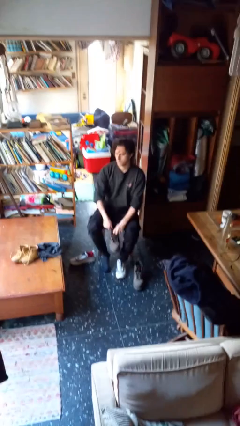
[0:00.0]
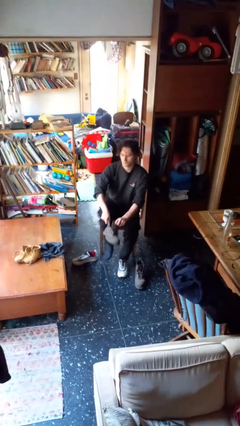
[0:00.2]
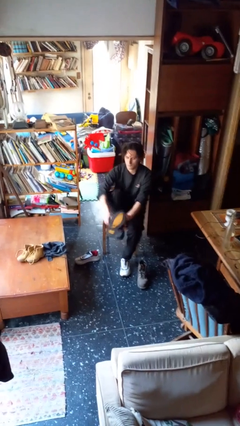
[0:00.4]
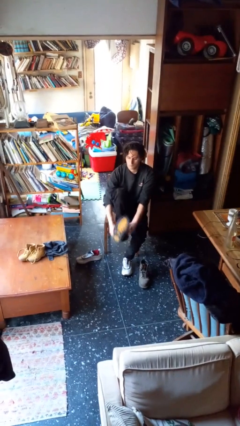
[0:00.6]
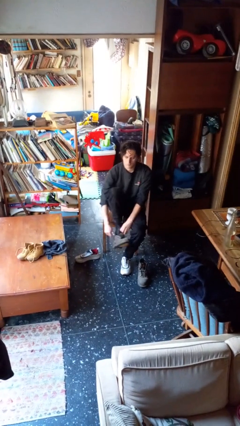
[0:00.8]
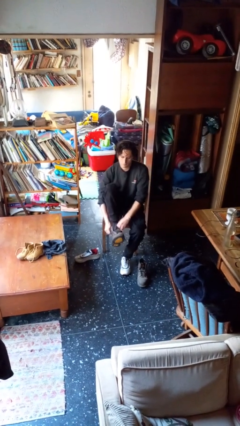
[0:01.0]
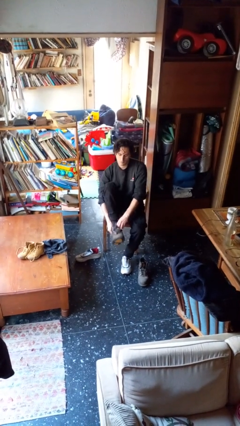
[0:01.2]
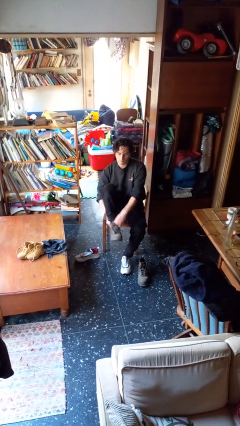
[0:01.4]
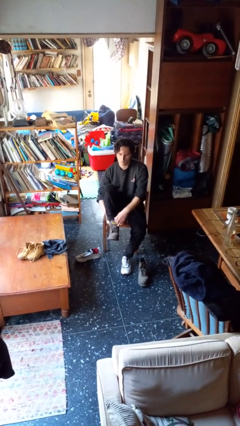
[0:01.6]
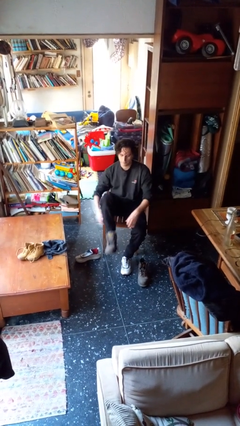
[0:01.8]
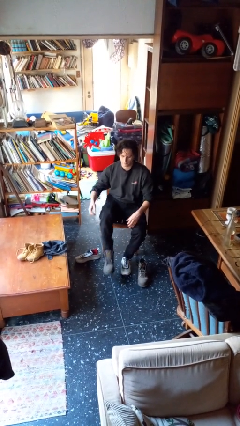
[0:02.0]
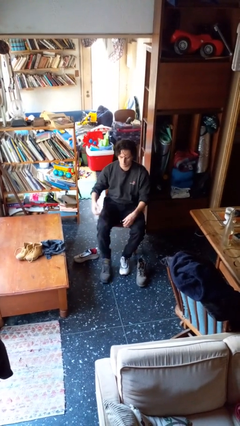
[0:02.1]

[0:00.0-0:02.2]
person puts on boots

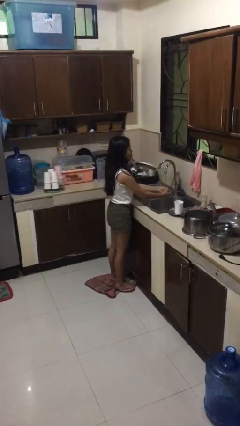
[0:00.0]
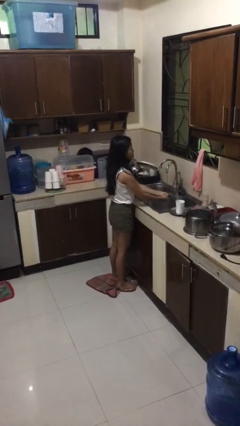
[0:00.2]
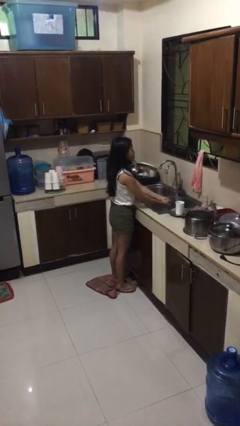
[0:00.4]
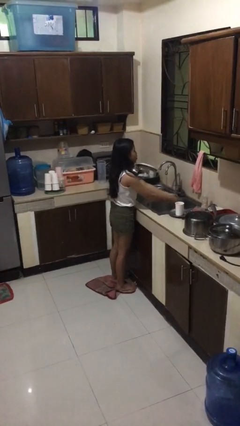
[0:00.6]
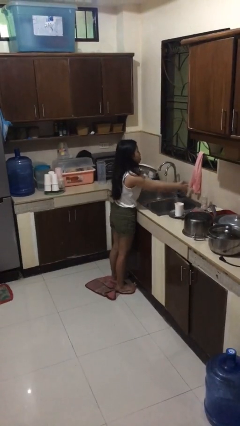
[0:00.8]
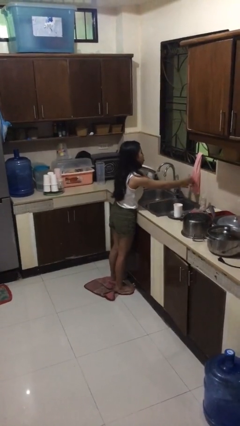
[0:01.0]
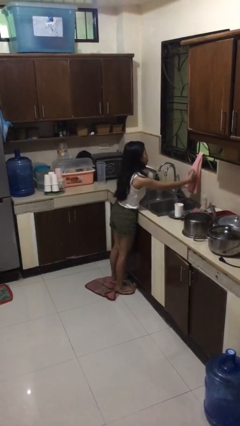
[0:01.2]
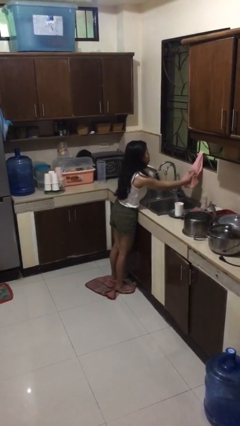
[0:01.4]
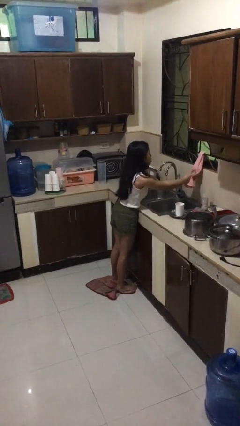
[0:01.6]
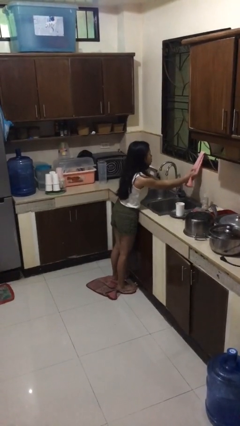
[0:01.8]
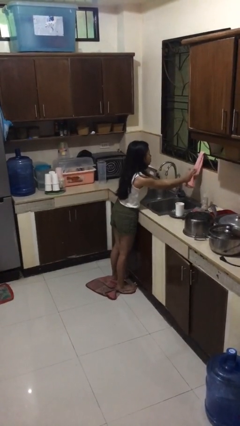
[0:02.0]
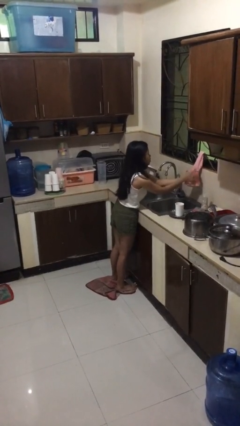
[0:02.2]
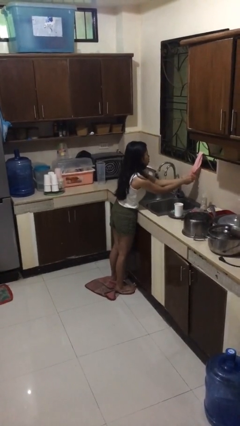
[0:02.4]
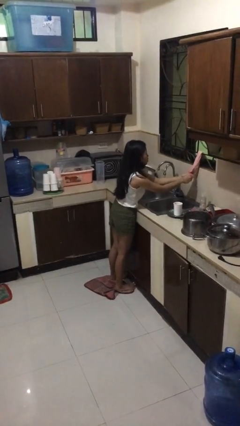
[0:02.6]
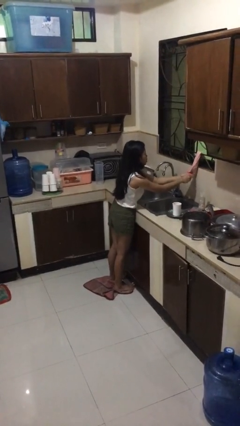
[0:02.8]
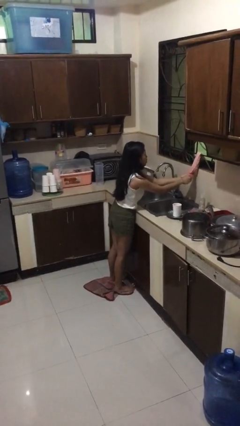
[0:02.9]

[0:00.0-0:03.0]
person dries hands with towel

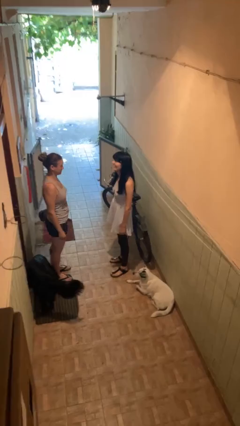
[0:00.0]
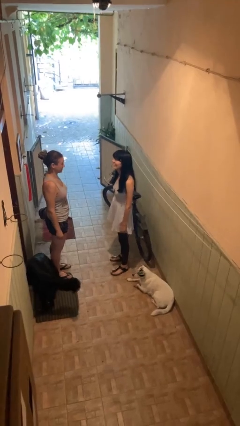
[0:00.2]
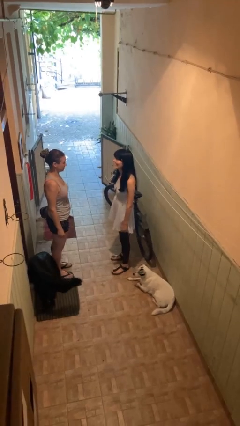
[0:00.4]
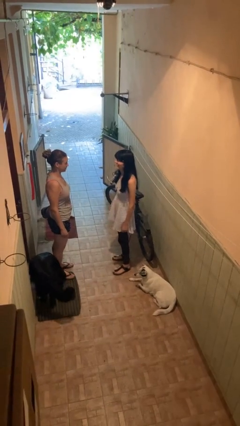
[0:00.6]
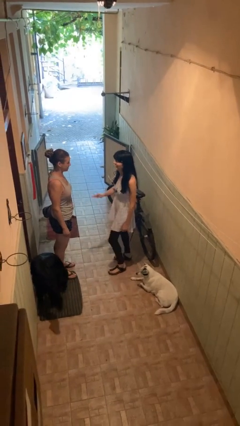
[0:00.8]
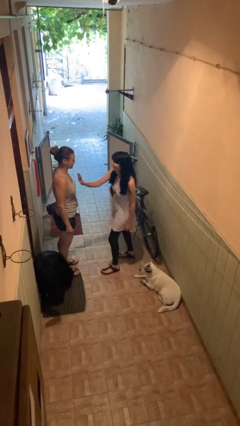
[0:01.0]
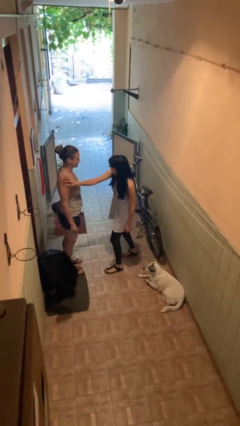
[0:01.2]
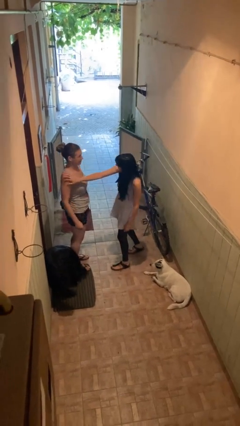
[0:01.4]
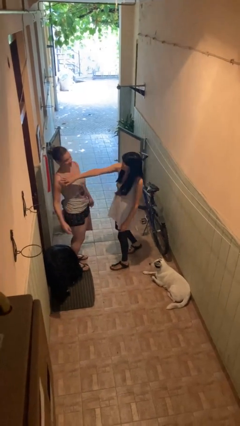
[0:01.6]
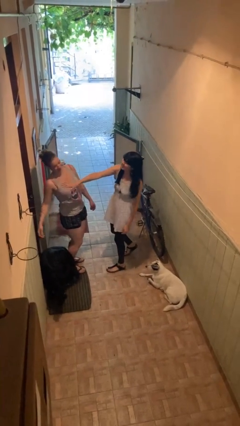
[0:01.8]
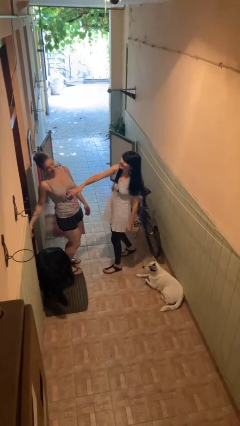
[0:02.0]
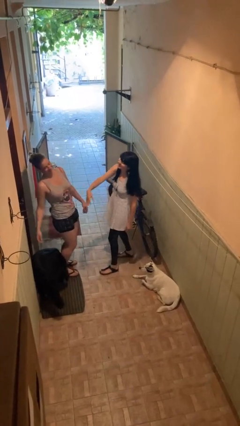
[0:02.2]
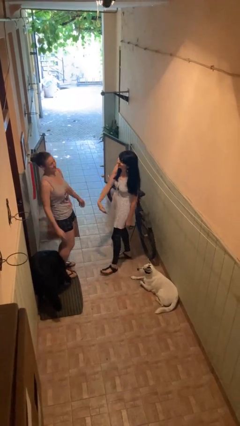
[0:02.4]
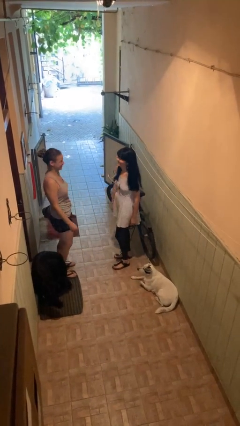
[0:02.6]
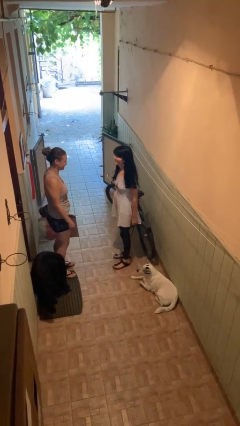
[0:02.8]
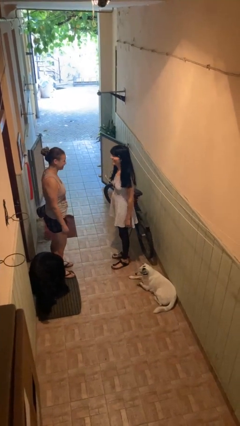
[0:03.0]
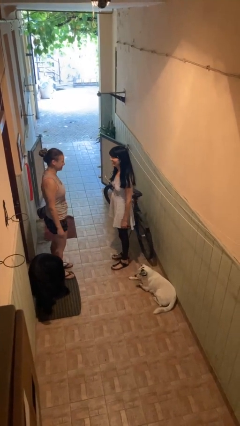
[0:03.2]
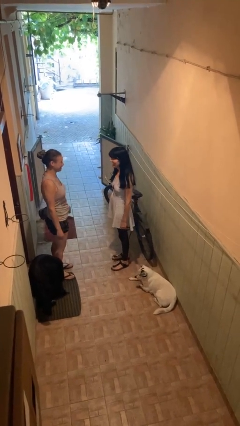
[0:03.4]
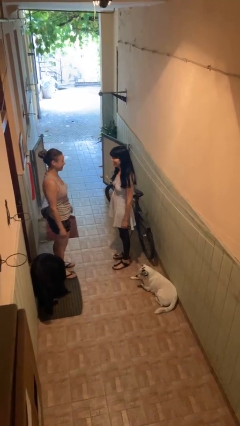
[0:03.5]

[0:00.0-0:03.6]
person shoves person

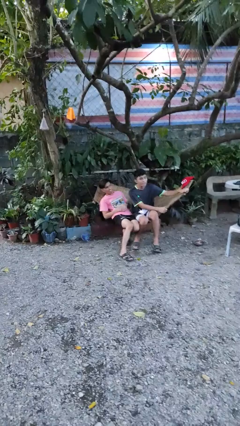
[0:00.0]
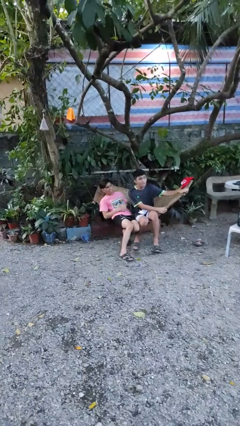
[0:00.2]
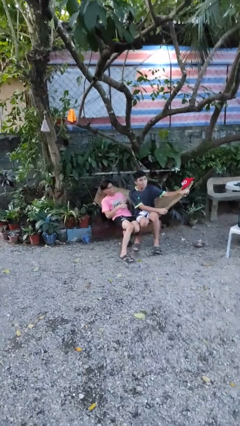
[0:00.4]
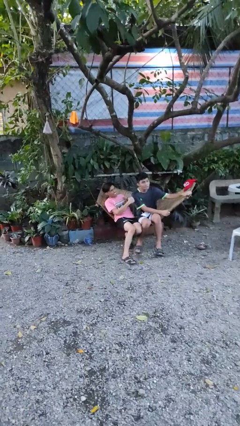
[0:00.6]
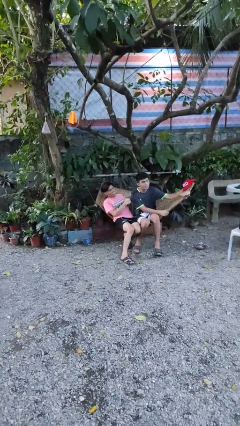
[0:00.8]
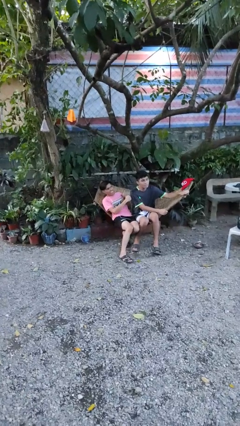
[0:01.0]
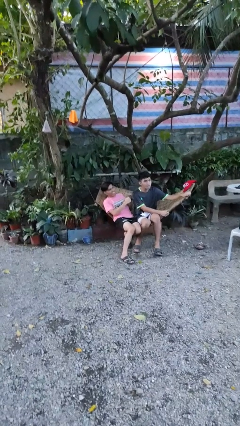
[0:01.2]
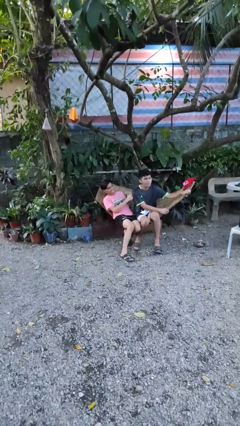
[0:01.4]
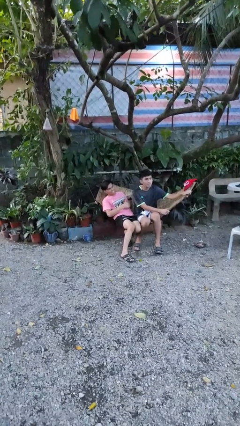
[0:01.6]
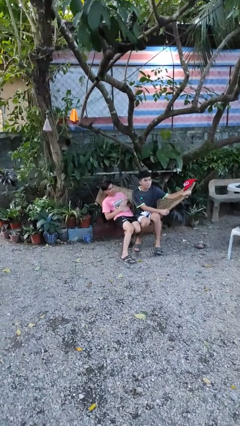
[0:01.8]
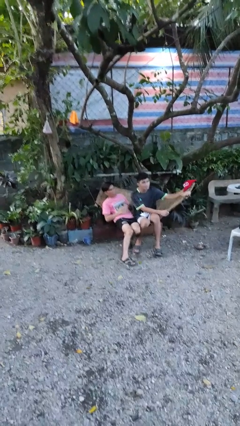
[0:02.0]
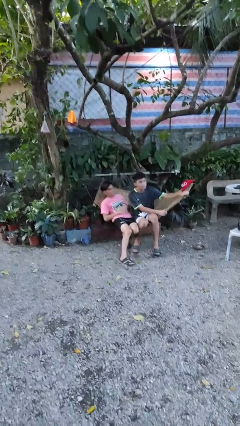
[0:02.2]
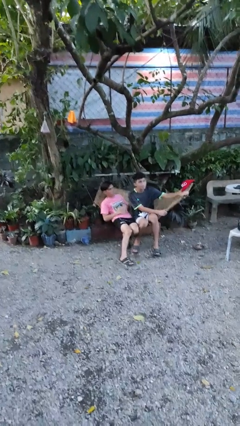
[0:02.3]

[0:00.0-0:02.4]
person pounds shoulders of person

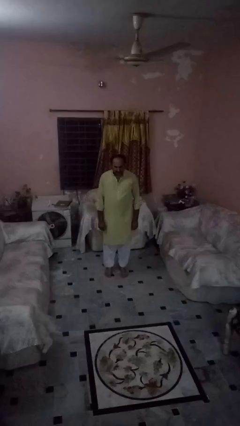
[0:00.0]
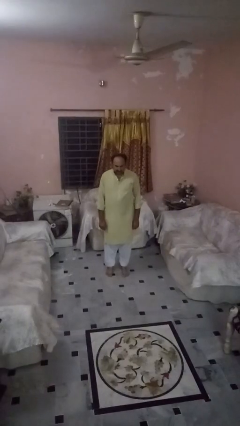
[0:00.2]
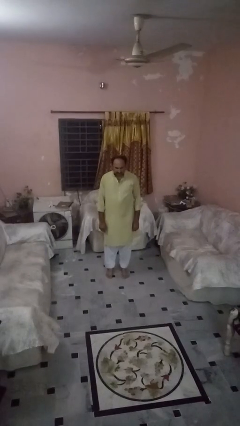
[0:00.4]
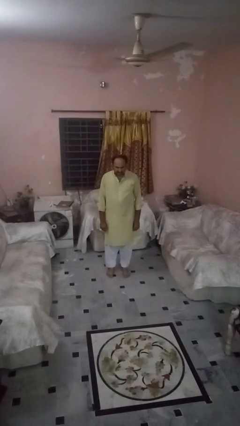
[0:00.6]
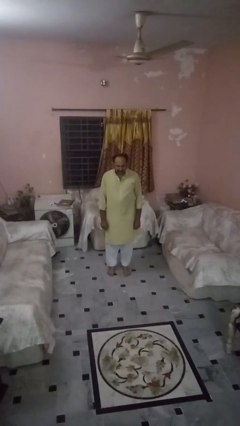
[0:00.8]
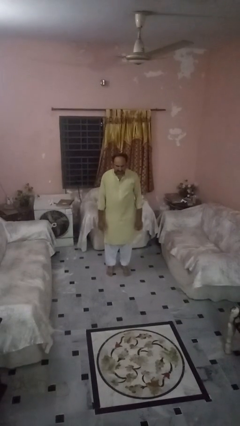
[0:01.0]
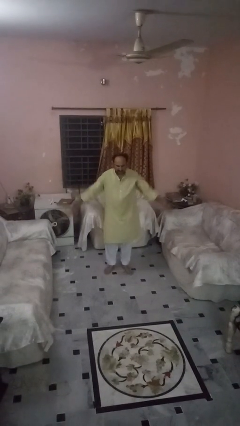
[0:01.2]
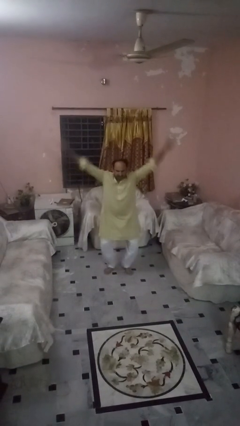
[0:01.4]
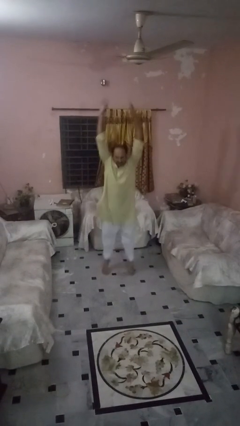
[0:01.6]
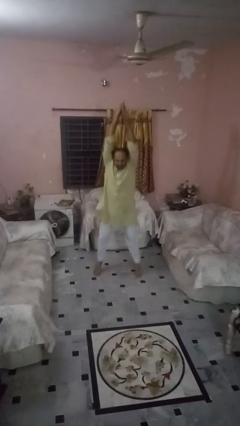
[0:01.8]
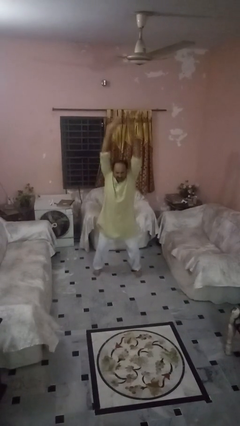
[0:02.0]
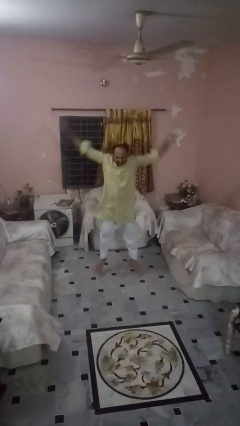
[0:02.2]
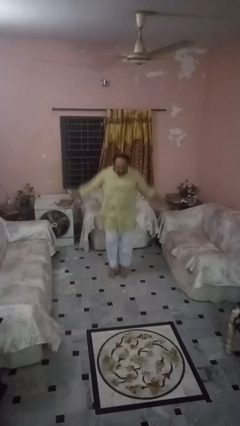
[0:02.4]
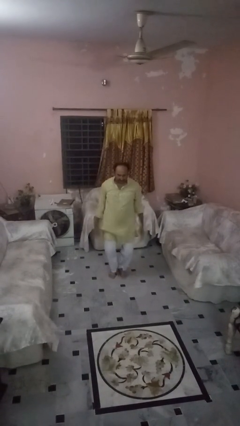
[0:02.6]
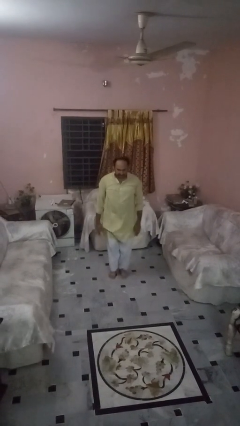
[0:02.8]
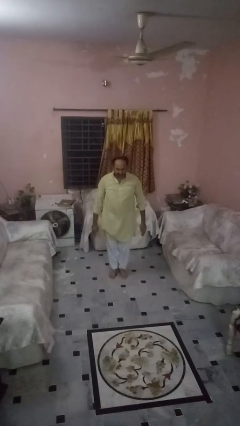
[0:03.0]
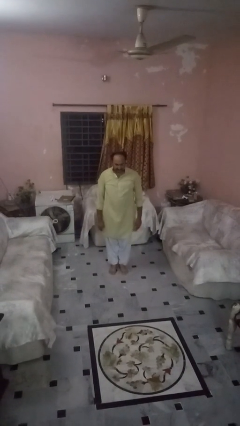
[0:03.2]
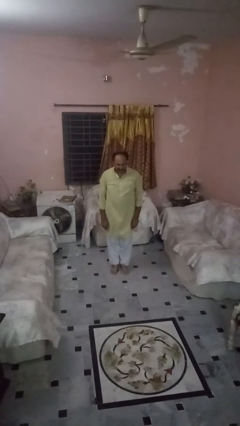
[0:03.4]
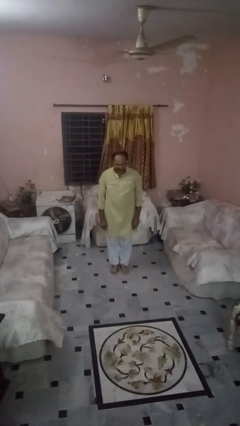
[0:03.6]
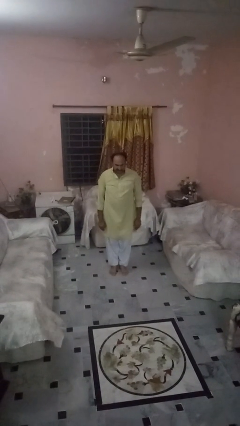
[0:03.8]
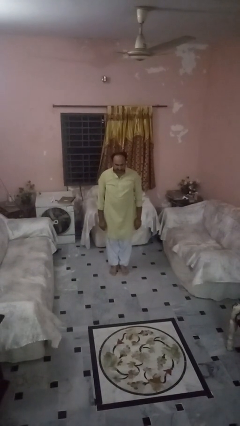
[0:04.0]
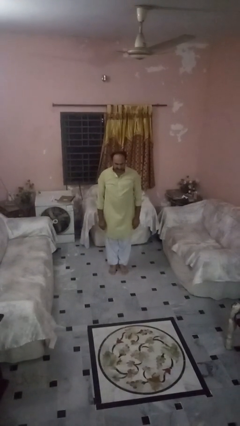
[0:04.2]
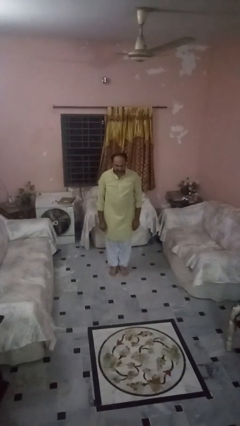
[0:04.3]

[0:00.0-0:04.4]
person exercises with jumping jacks

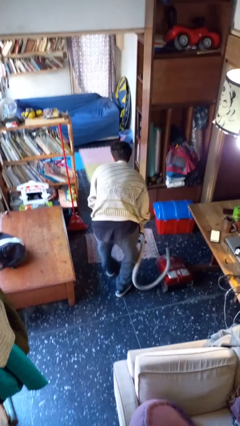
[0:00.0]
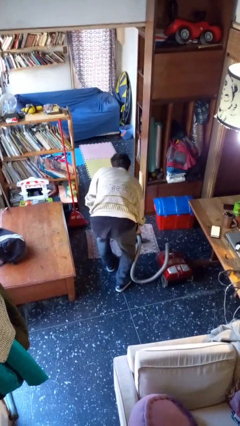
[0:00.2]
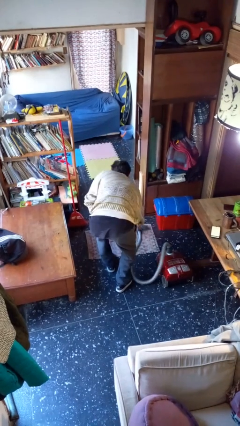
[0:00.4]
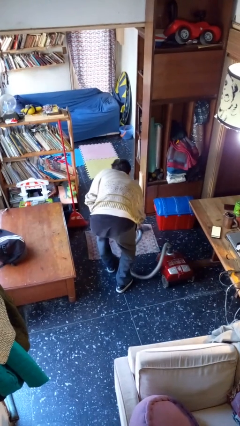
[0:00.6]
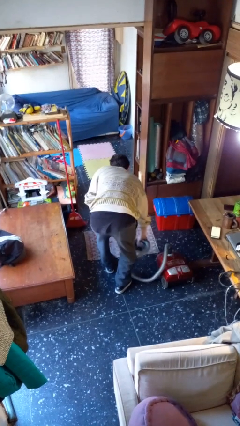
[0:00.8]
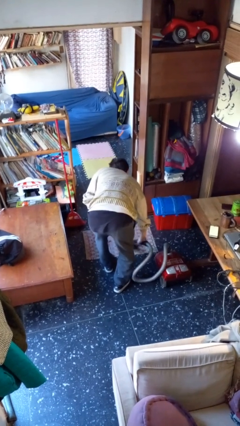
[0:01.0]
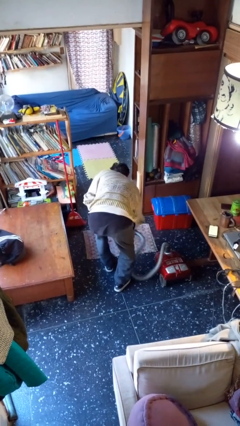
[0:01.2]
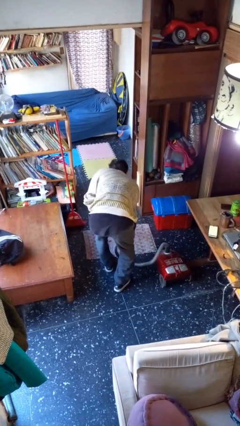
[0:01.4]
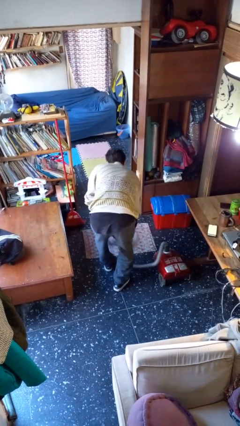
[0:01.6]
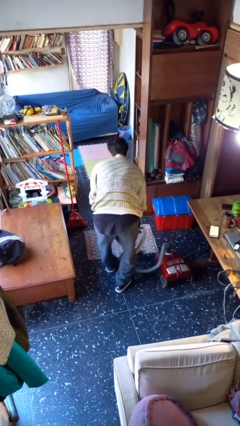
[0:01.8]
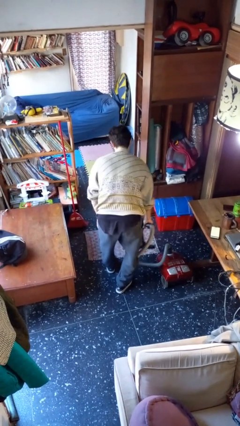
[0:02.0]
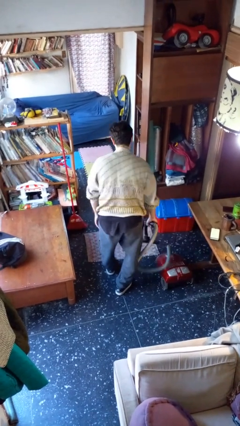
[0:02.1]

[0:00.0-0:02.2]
person vacuums carpet
